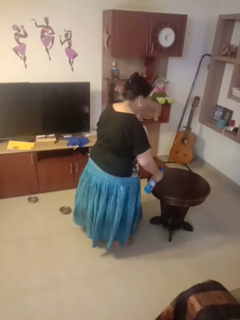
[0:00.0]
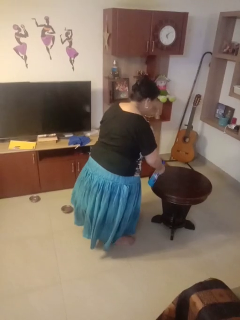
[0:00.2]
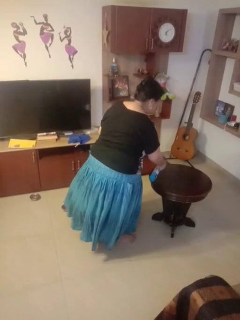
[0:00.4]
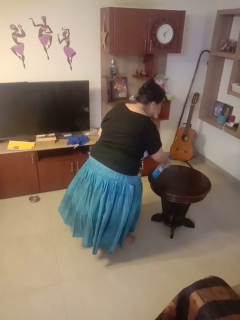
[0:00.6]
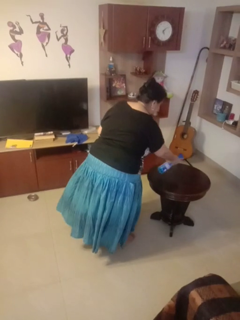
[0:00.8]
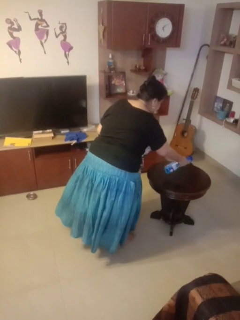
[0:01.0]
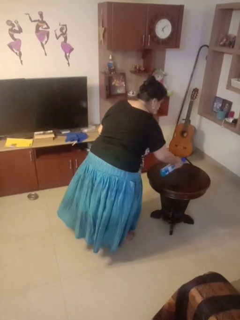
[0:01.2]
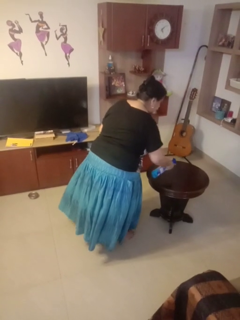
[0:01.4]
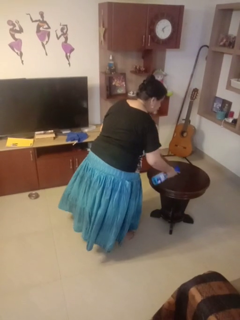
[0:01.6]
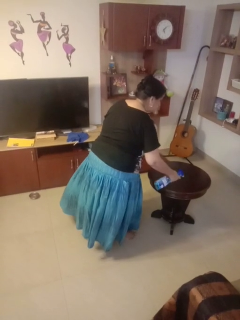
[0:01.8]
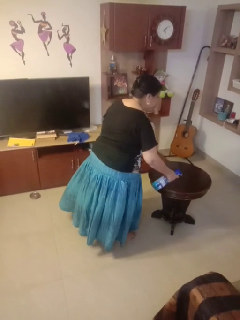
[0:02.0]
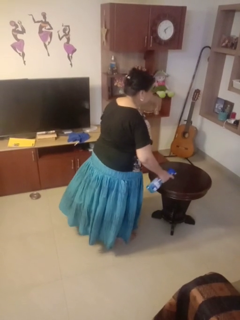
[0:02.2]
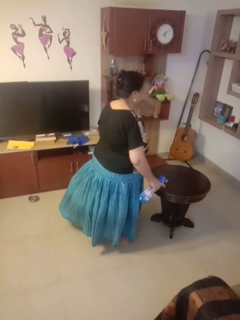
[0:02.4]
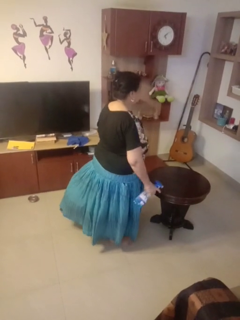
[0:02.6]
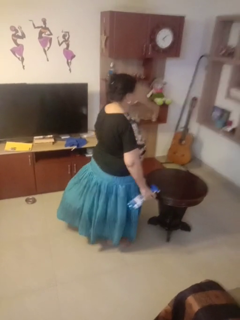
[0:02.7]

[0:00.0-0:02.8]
person sprays from bottle

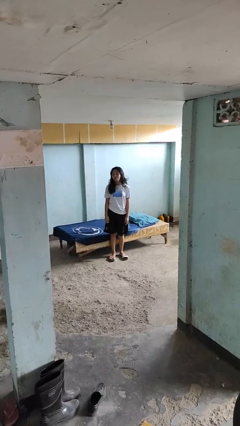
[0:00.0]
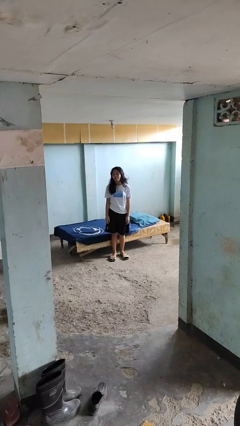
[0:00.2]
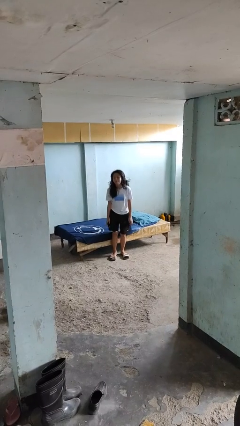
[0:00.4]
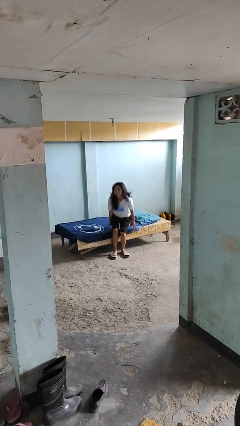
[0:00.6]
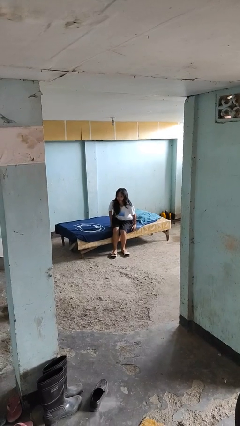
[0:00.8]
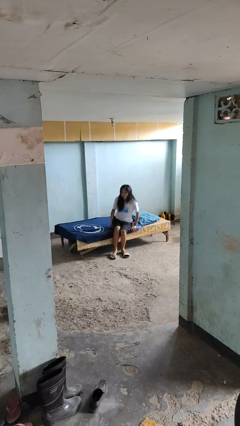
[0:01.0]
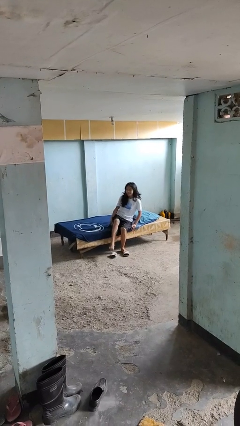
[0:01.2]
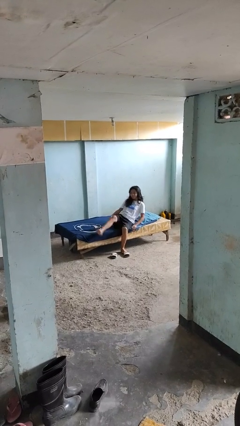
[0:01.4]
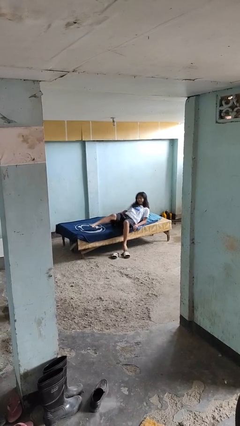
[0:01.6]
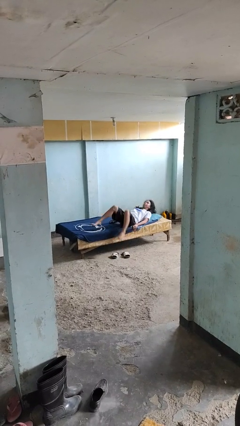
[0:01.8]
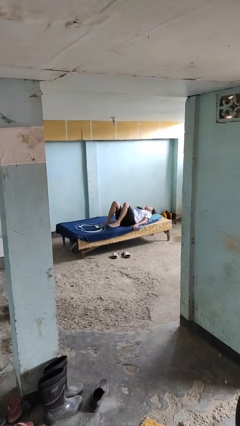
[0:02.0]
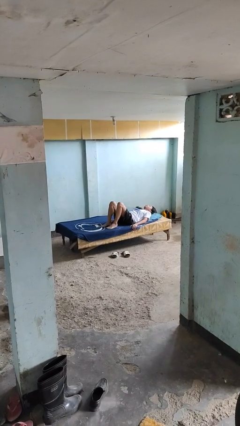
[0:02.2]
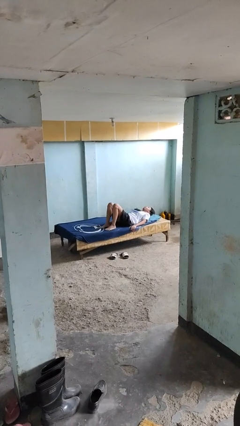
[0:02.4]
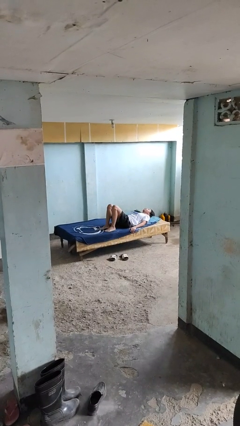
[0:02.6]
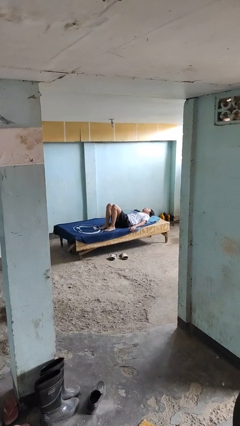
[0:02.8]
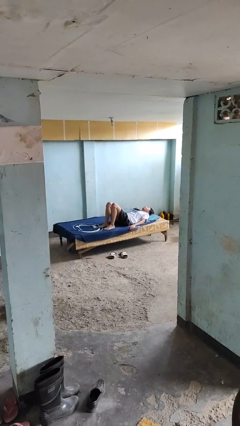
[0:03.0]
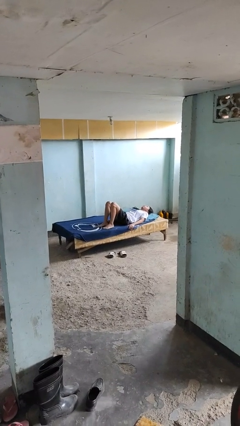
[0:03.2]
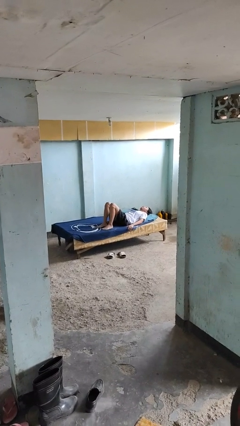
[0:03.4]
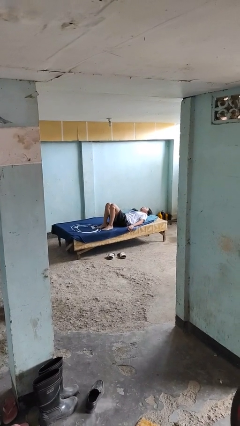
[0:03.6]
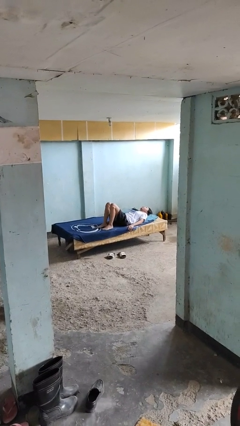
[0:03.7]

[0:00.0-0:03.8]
person lies down on bed

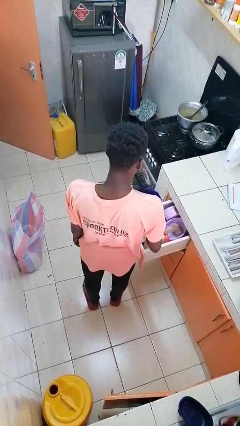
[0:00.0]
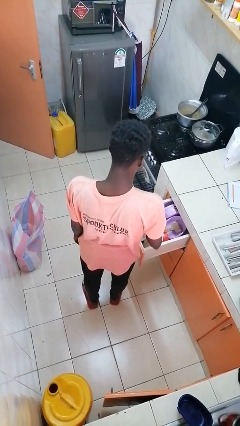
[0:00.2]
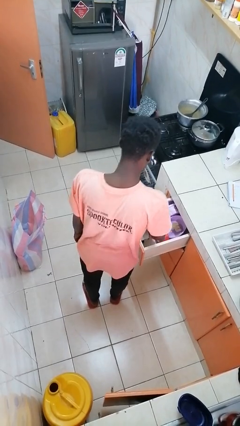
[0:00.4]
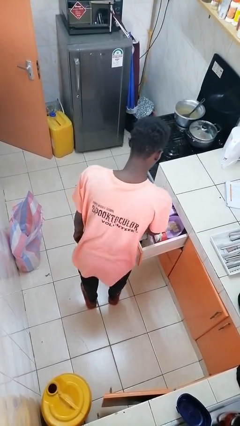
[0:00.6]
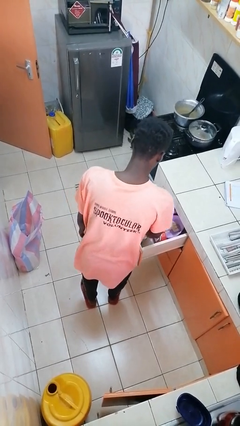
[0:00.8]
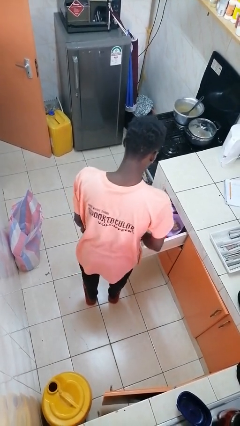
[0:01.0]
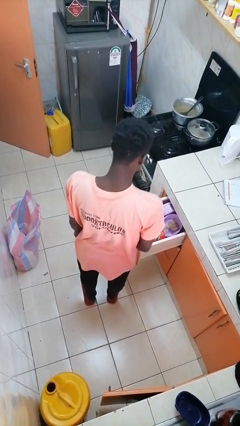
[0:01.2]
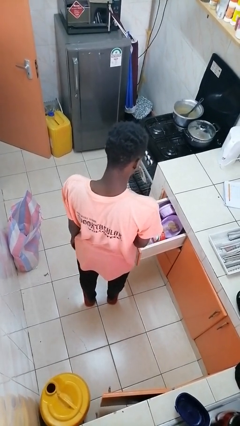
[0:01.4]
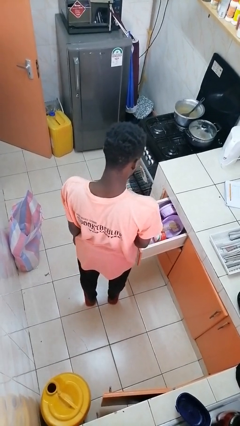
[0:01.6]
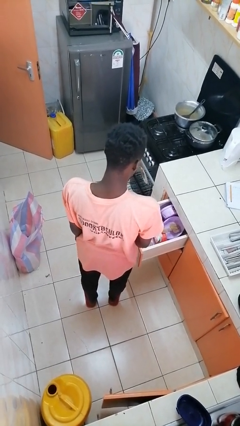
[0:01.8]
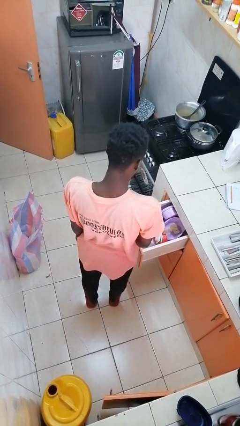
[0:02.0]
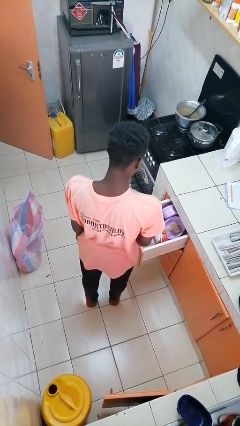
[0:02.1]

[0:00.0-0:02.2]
person puts object into kitchen drawer

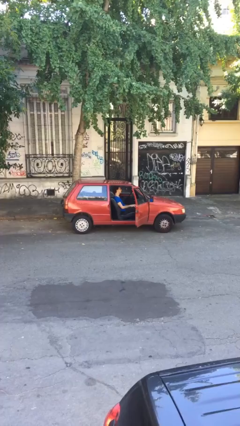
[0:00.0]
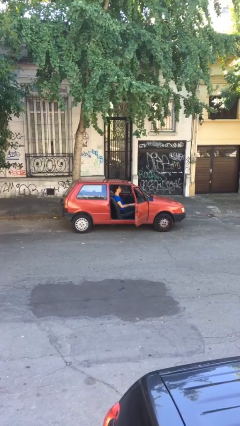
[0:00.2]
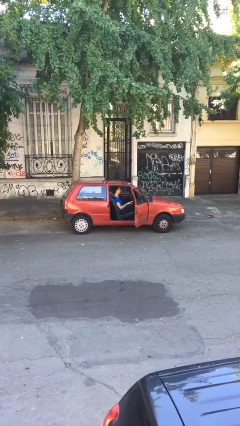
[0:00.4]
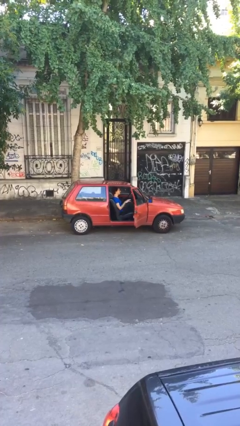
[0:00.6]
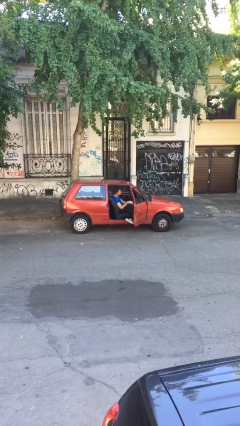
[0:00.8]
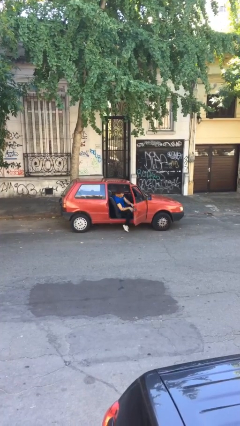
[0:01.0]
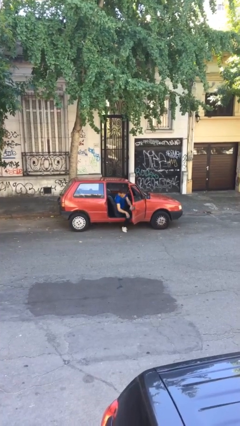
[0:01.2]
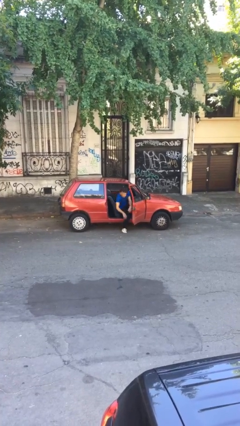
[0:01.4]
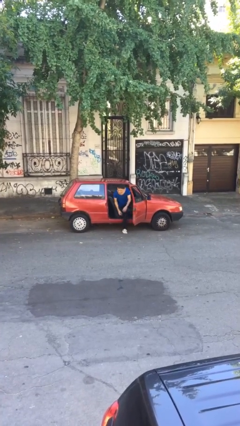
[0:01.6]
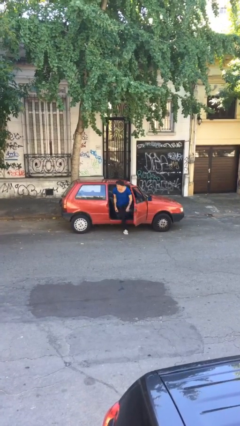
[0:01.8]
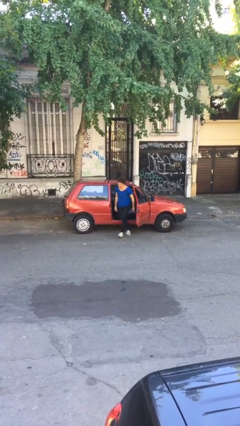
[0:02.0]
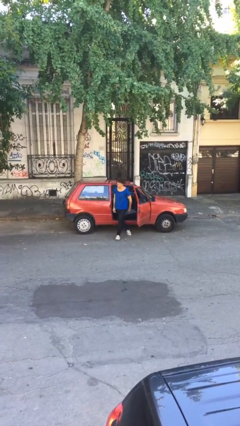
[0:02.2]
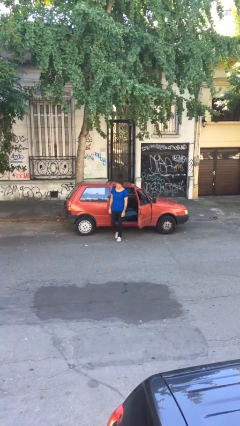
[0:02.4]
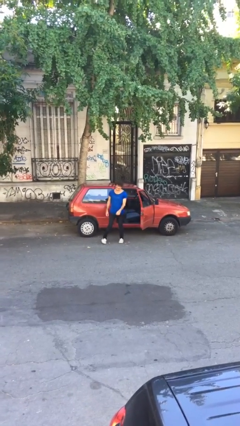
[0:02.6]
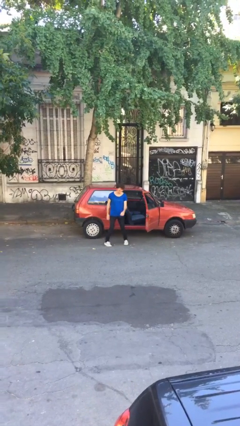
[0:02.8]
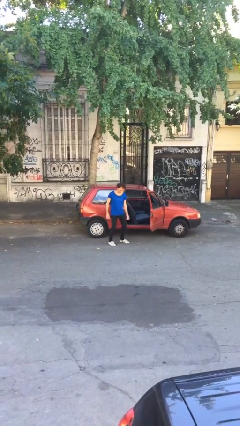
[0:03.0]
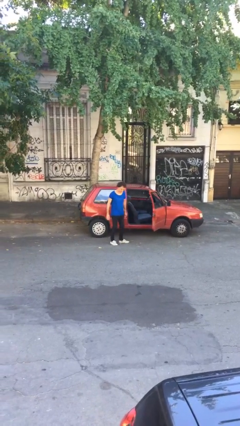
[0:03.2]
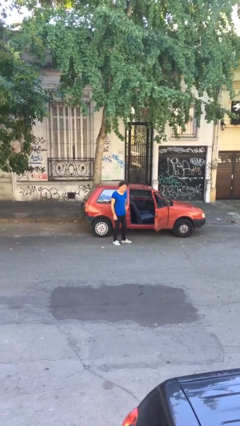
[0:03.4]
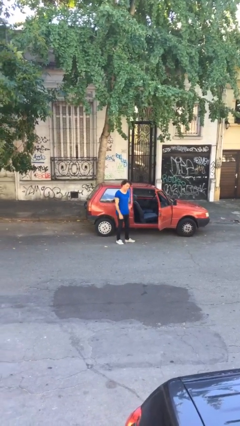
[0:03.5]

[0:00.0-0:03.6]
person exits car

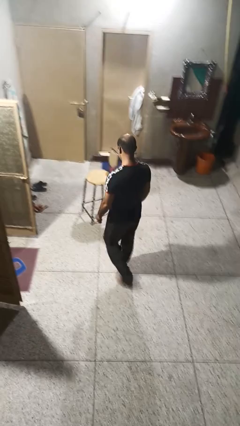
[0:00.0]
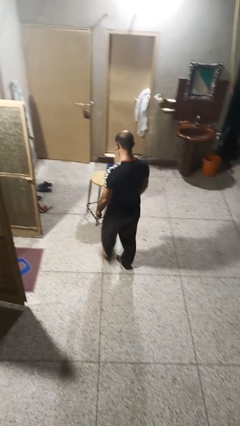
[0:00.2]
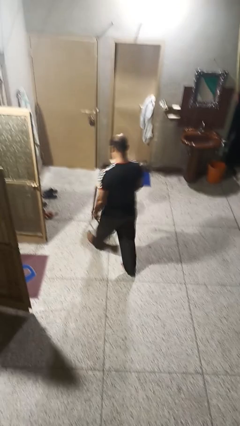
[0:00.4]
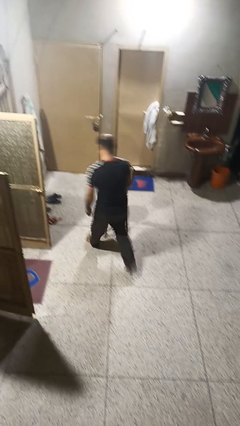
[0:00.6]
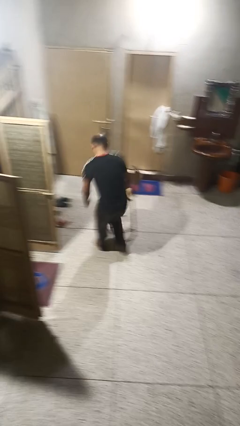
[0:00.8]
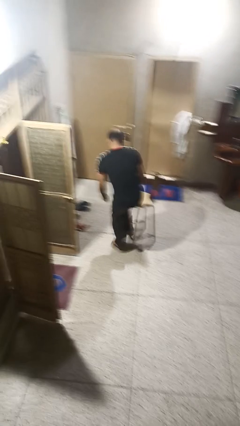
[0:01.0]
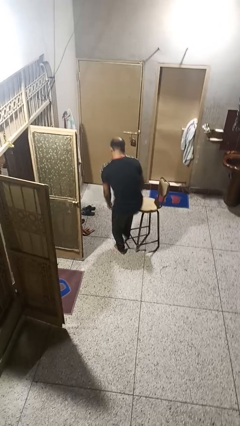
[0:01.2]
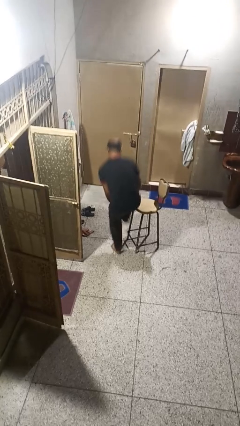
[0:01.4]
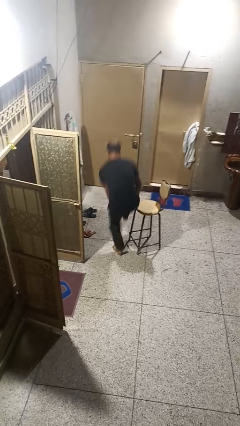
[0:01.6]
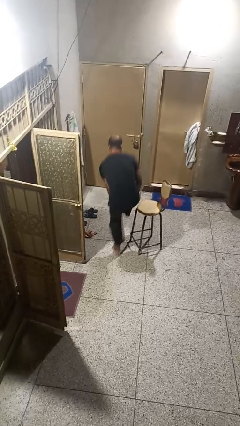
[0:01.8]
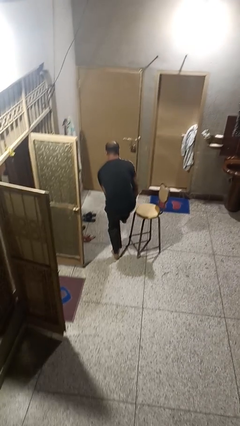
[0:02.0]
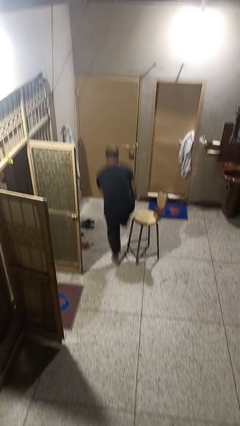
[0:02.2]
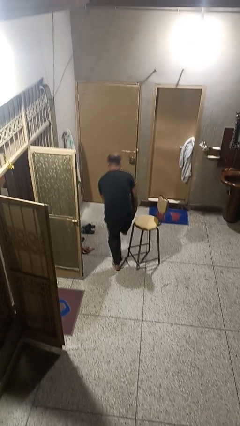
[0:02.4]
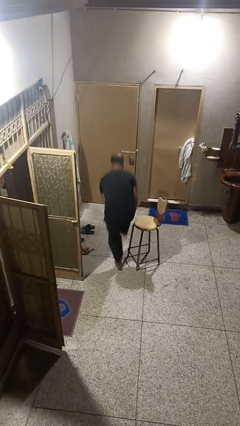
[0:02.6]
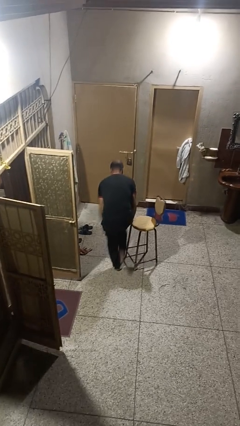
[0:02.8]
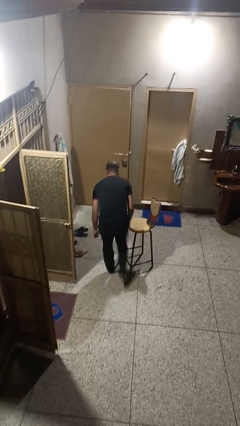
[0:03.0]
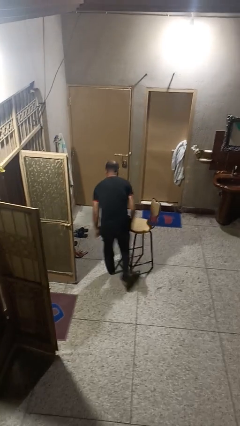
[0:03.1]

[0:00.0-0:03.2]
person stubs toe

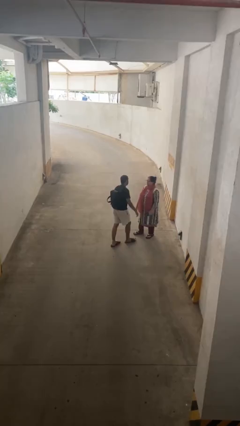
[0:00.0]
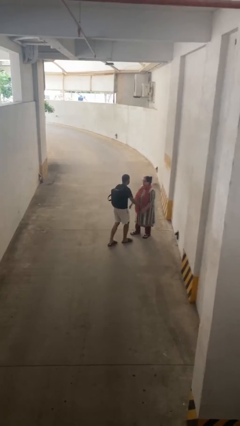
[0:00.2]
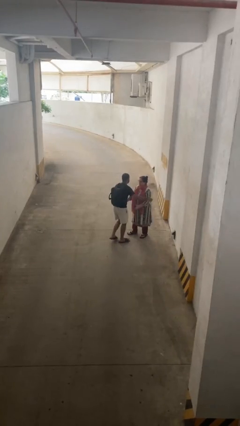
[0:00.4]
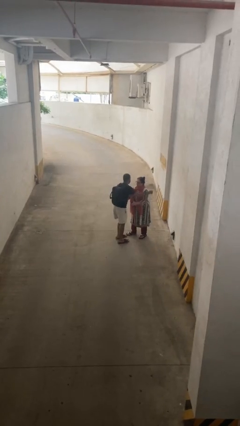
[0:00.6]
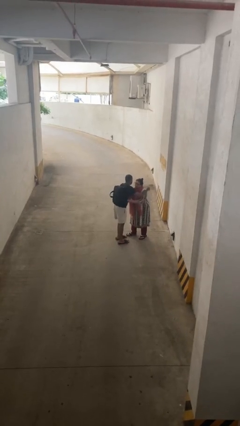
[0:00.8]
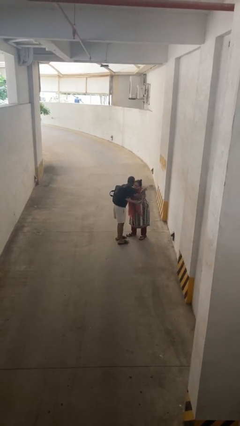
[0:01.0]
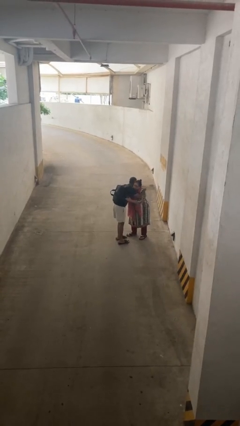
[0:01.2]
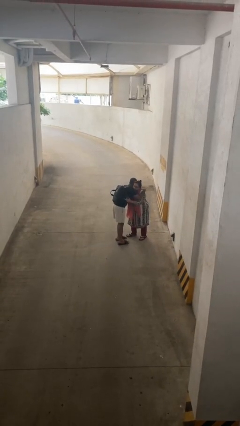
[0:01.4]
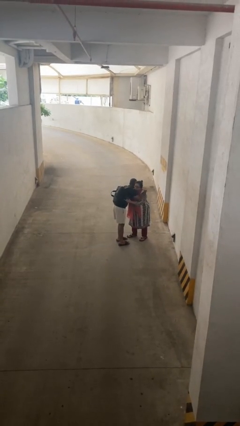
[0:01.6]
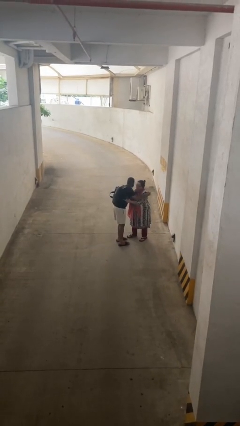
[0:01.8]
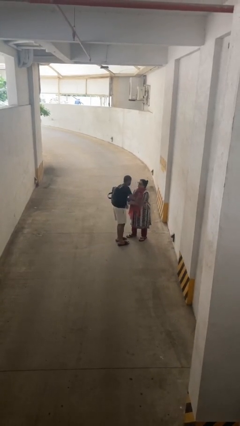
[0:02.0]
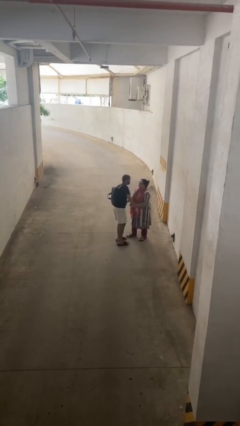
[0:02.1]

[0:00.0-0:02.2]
person embraces person
